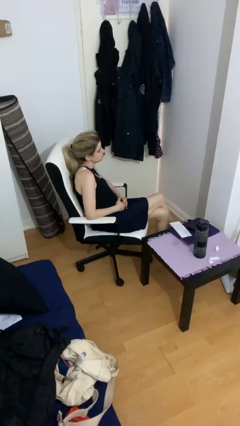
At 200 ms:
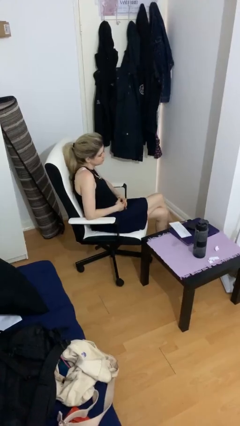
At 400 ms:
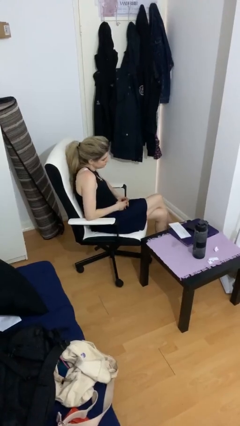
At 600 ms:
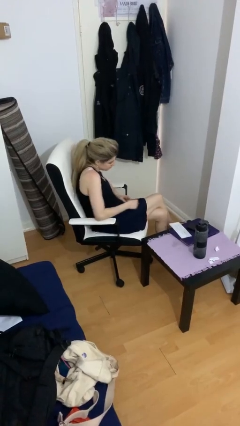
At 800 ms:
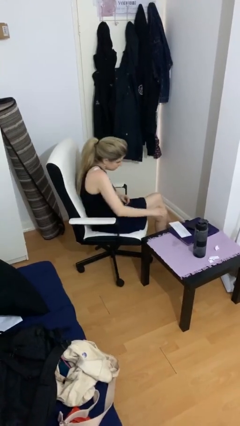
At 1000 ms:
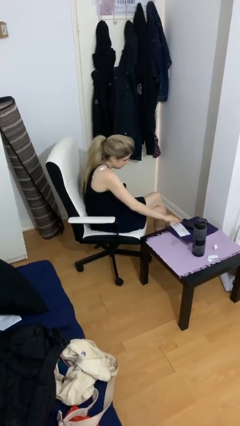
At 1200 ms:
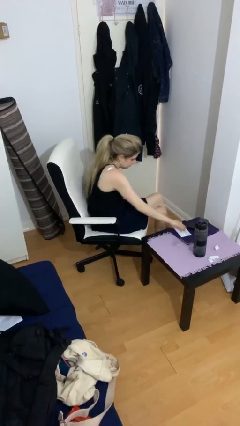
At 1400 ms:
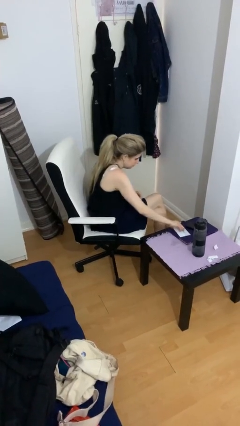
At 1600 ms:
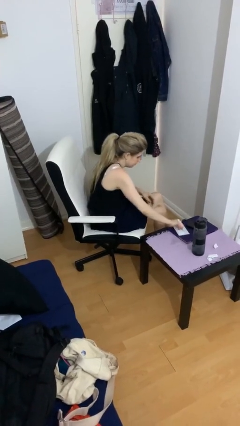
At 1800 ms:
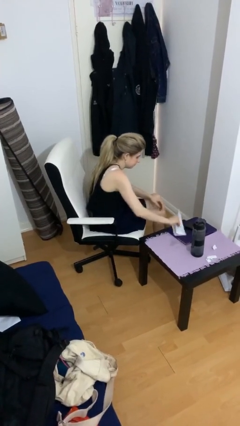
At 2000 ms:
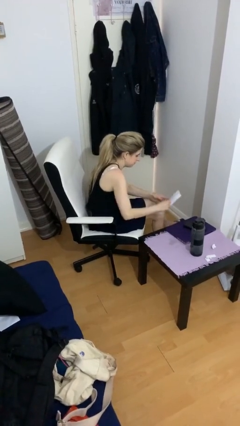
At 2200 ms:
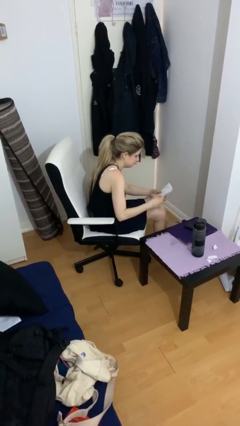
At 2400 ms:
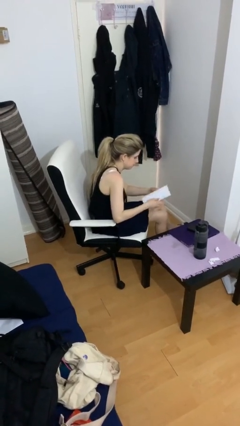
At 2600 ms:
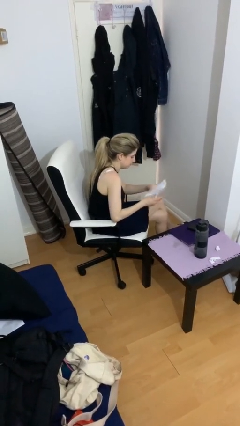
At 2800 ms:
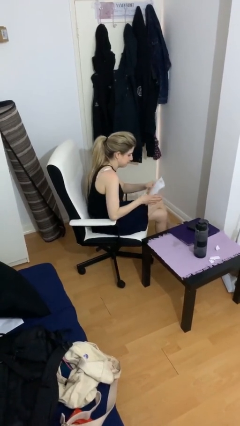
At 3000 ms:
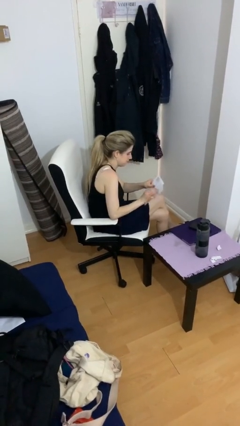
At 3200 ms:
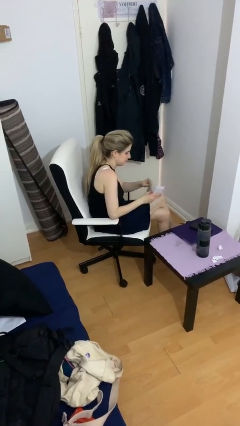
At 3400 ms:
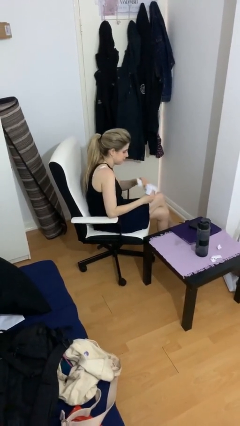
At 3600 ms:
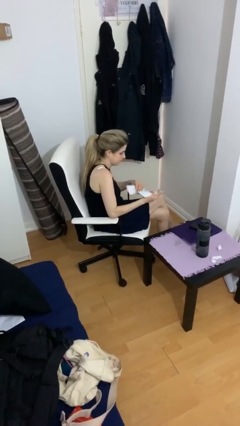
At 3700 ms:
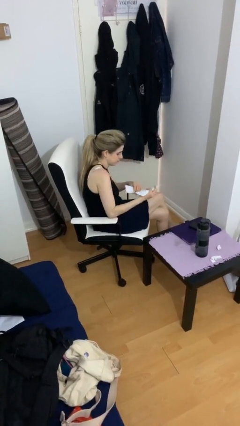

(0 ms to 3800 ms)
person picks up object from table

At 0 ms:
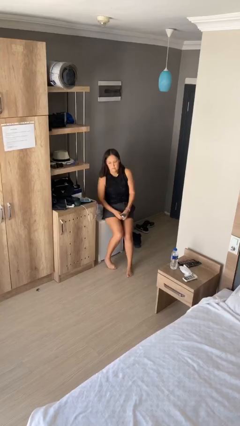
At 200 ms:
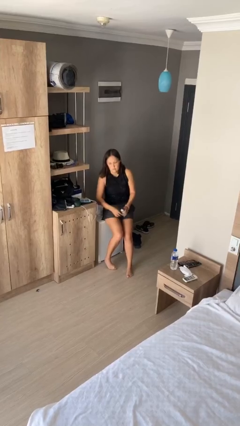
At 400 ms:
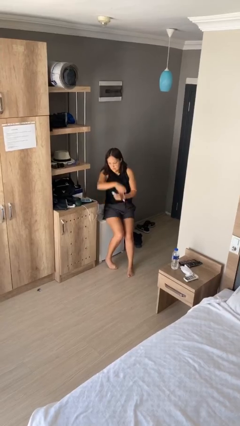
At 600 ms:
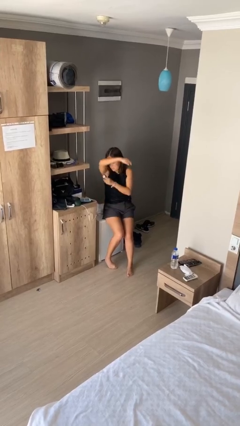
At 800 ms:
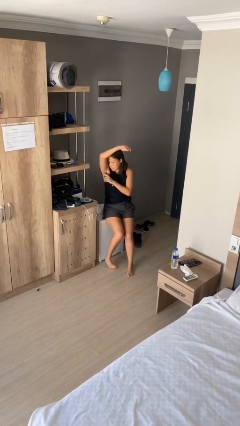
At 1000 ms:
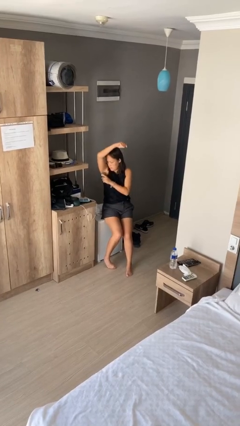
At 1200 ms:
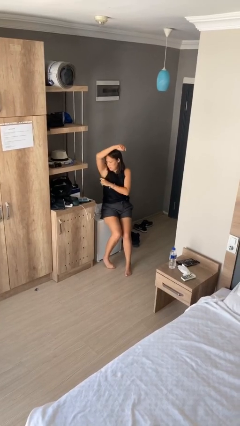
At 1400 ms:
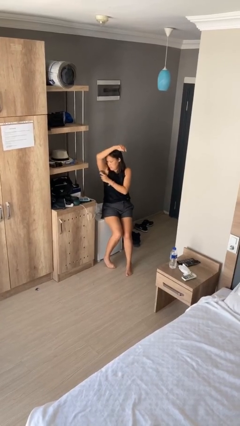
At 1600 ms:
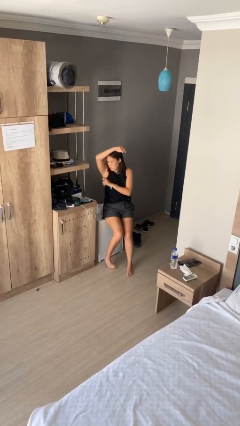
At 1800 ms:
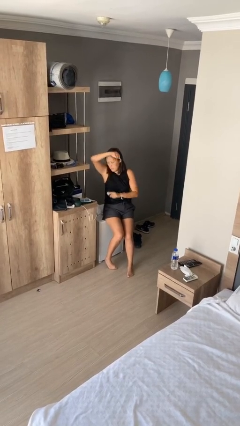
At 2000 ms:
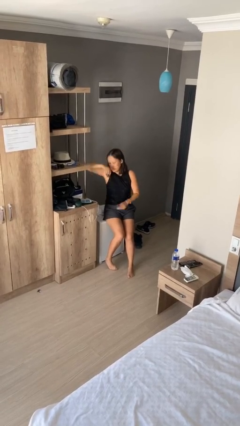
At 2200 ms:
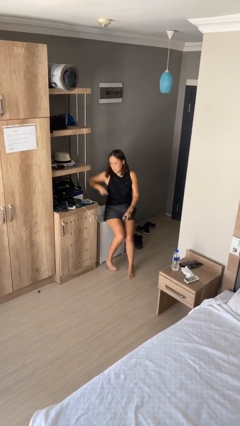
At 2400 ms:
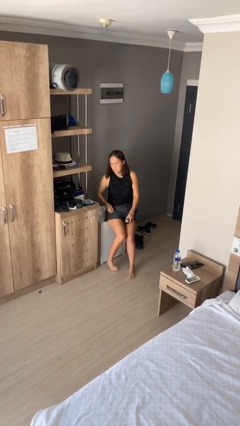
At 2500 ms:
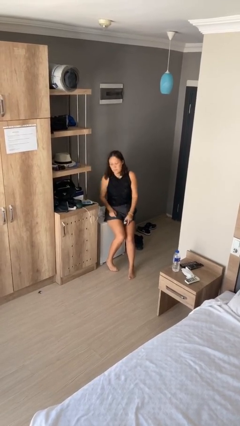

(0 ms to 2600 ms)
person applies deodorant

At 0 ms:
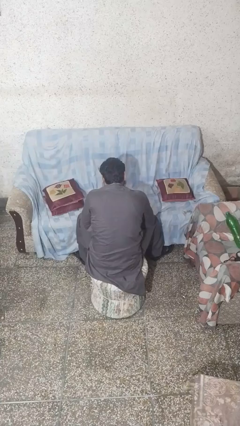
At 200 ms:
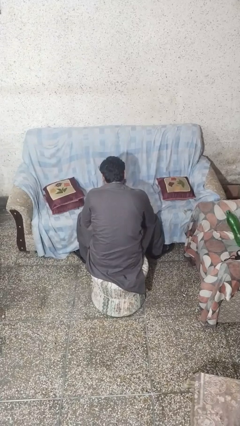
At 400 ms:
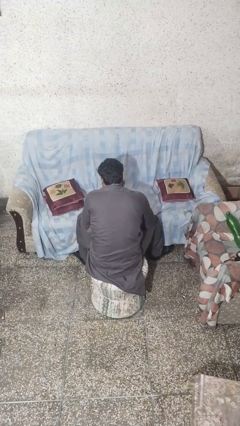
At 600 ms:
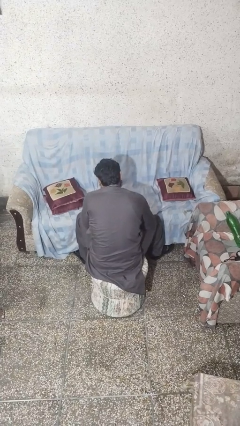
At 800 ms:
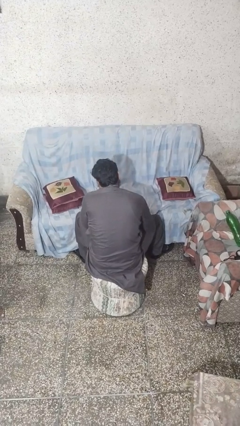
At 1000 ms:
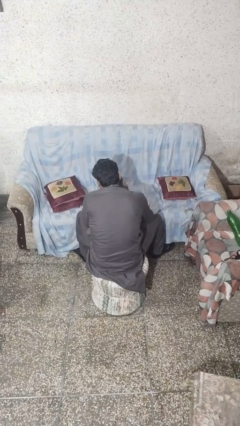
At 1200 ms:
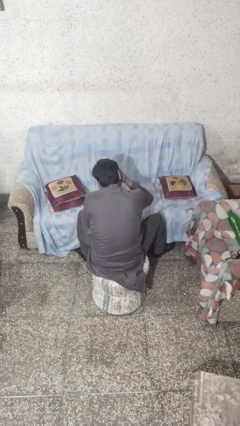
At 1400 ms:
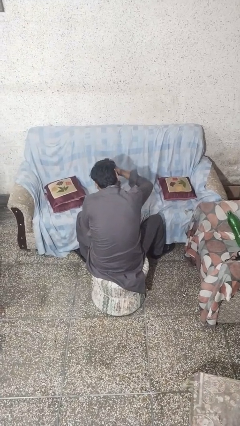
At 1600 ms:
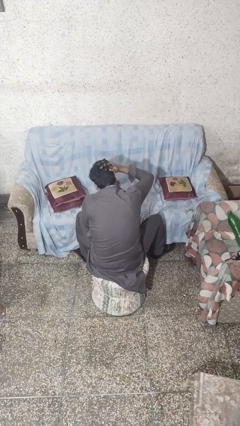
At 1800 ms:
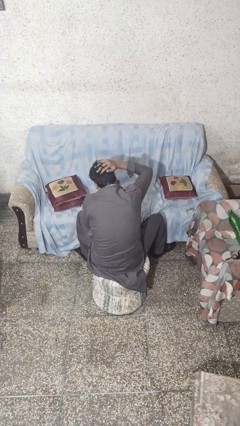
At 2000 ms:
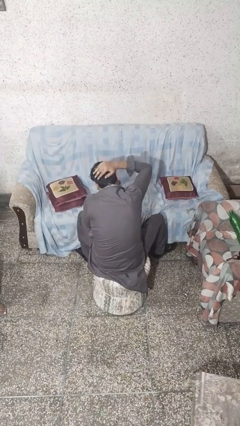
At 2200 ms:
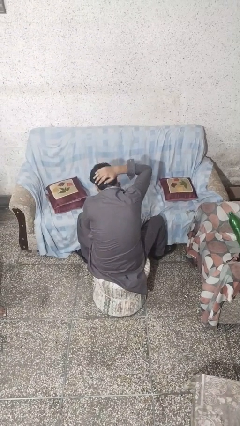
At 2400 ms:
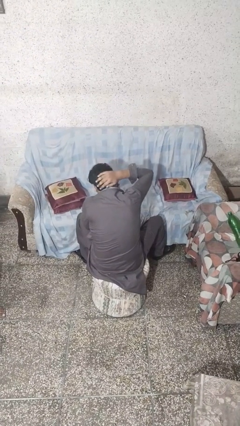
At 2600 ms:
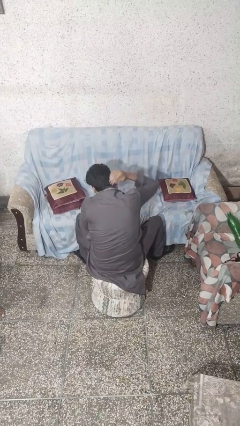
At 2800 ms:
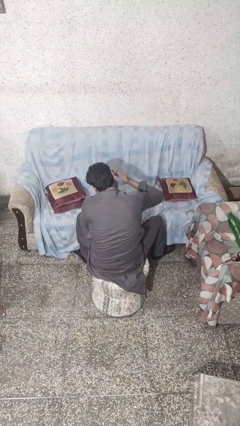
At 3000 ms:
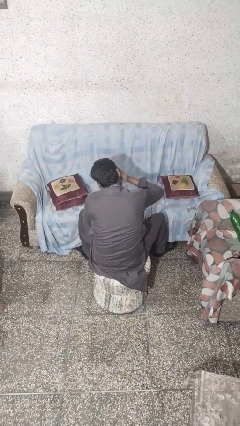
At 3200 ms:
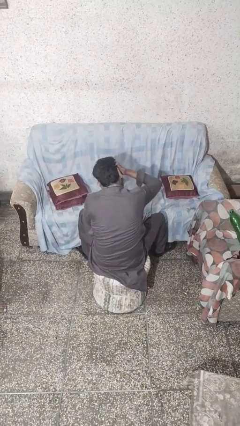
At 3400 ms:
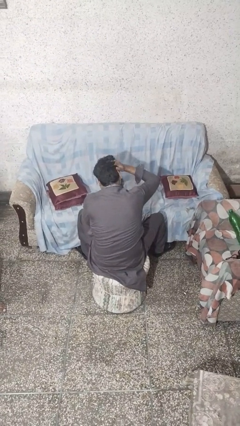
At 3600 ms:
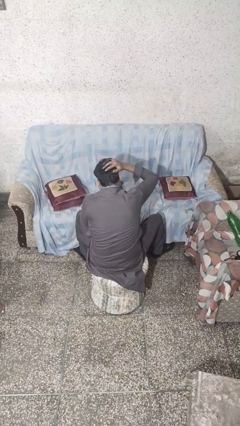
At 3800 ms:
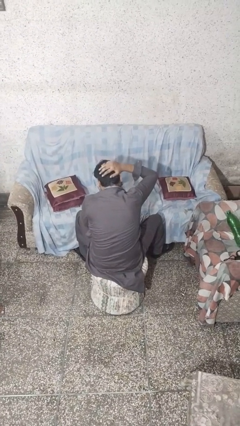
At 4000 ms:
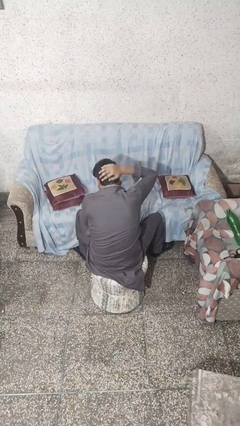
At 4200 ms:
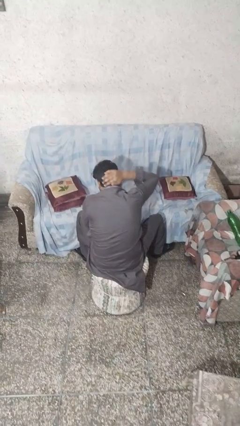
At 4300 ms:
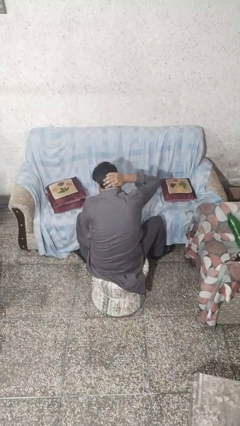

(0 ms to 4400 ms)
person strokes hair

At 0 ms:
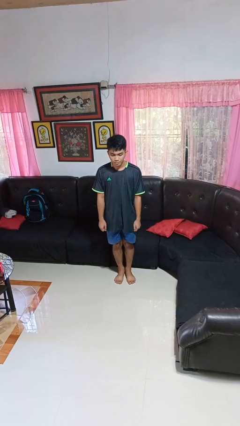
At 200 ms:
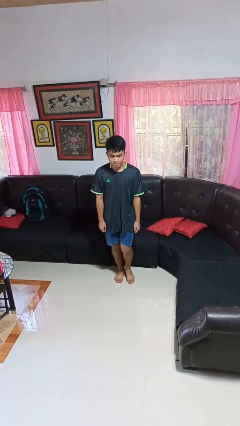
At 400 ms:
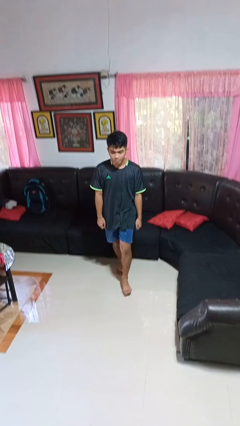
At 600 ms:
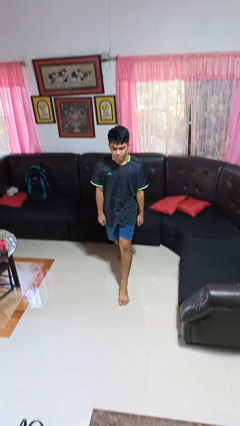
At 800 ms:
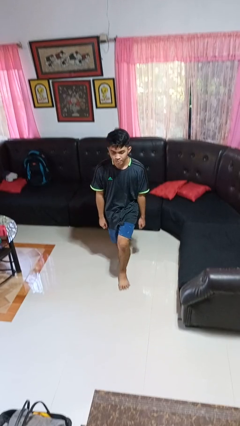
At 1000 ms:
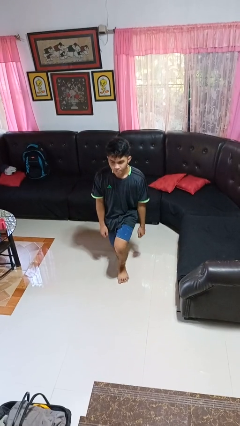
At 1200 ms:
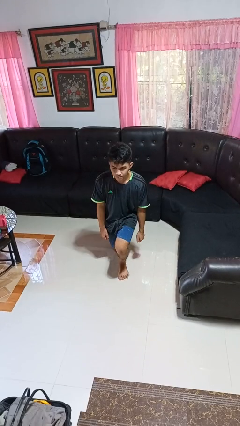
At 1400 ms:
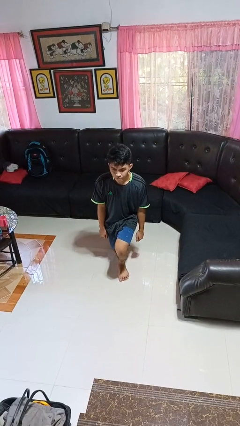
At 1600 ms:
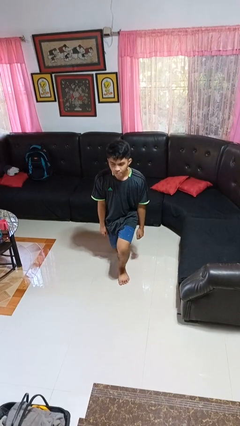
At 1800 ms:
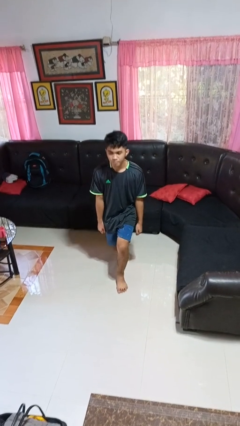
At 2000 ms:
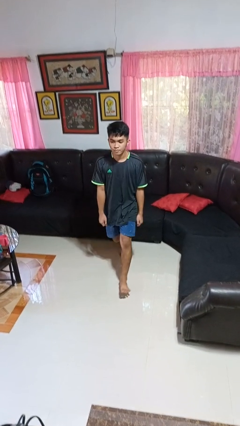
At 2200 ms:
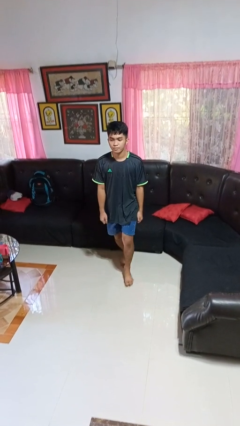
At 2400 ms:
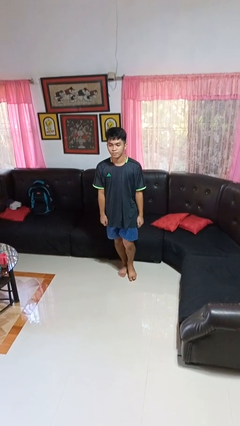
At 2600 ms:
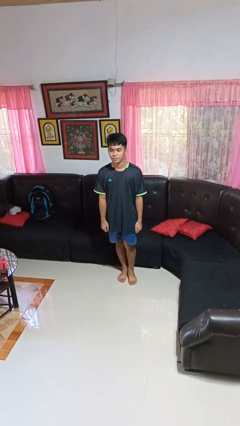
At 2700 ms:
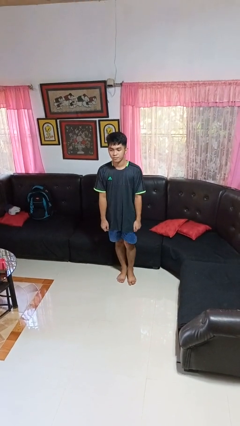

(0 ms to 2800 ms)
person exercises with lunges

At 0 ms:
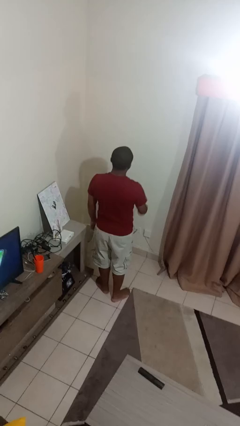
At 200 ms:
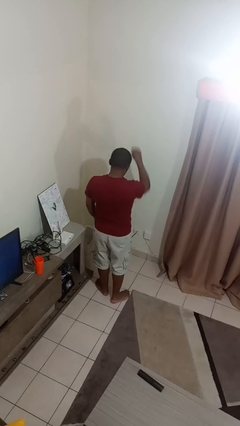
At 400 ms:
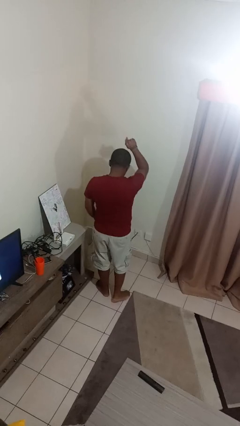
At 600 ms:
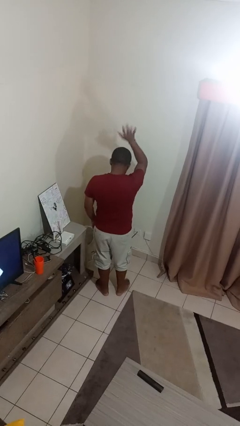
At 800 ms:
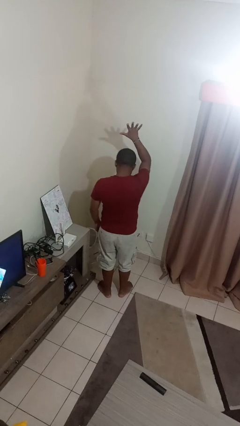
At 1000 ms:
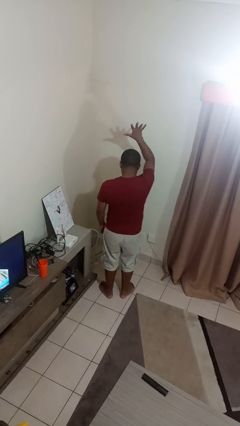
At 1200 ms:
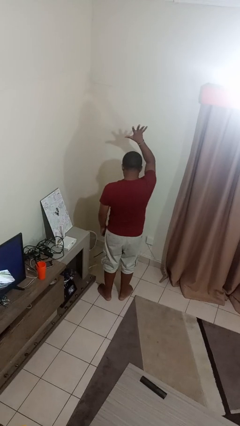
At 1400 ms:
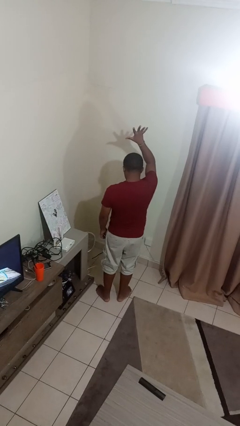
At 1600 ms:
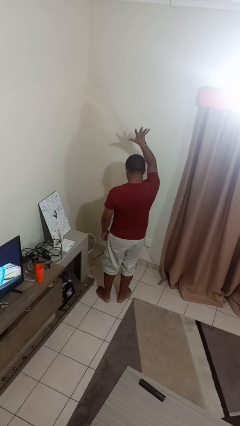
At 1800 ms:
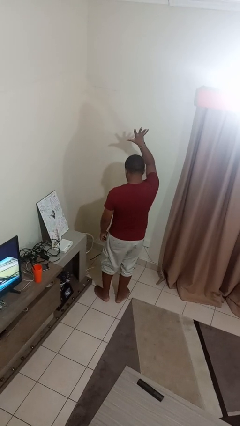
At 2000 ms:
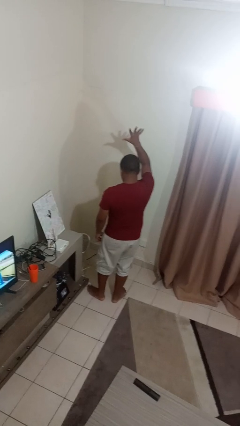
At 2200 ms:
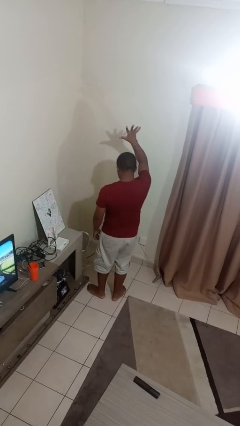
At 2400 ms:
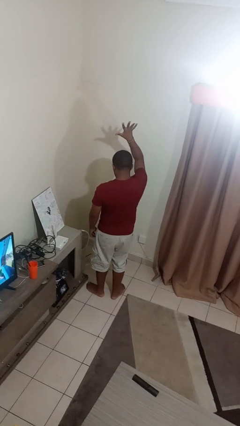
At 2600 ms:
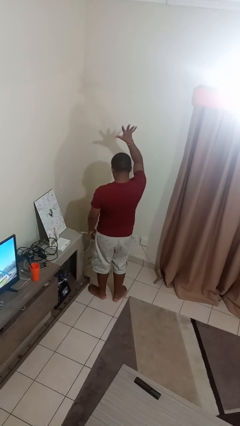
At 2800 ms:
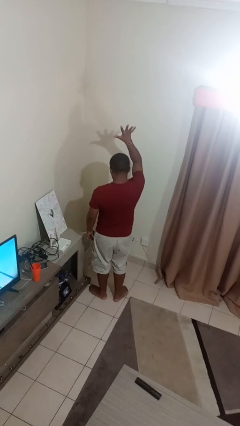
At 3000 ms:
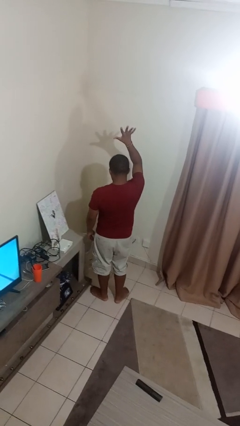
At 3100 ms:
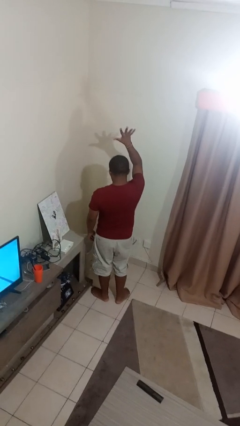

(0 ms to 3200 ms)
person gestures number five

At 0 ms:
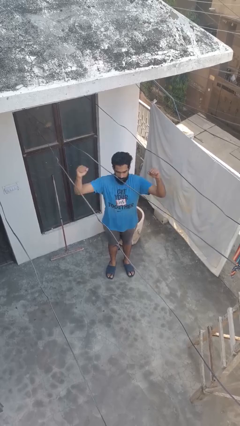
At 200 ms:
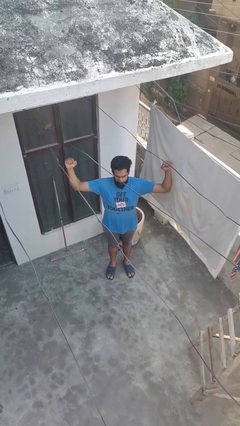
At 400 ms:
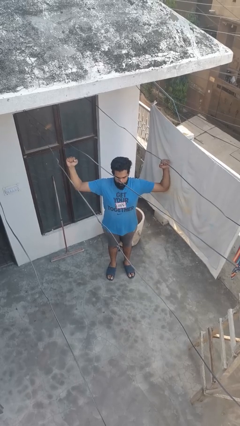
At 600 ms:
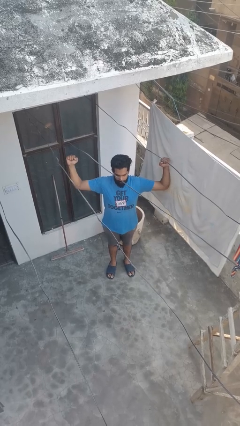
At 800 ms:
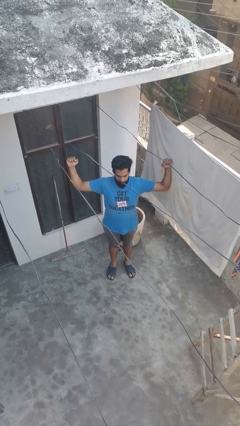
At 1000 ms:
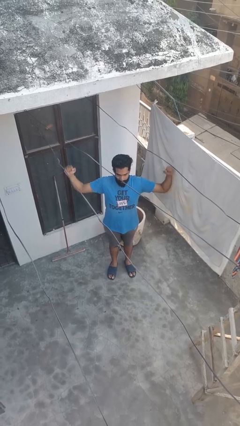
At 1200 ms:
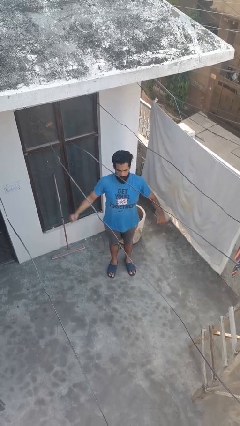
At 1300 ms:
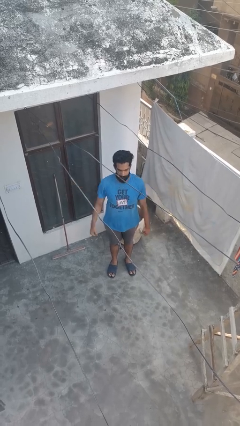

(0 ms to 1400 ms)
person gestures zoom out
